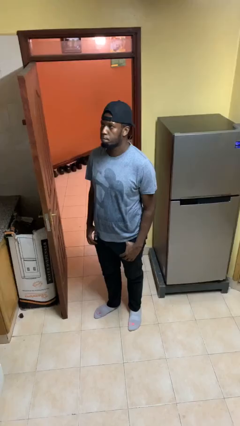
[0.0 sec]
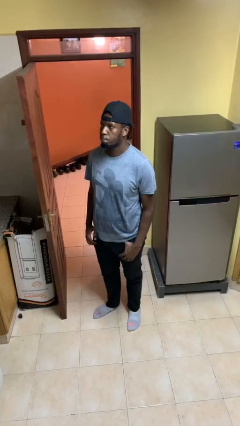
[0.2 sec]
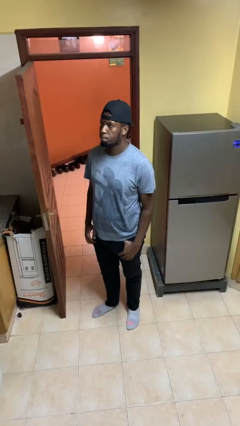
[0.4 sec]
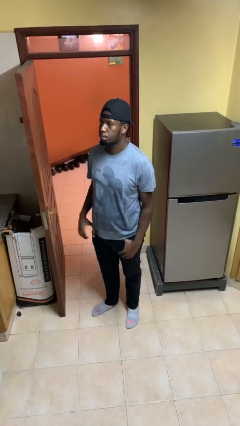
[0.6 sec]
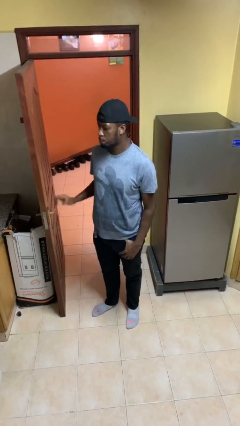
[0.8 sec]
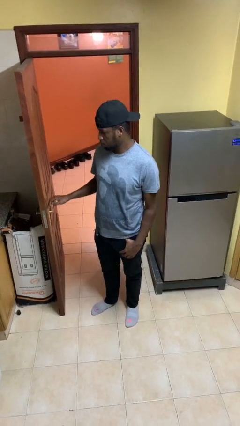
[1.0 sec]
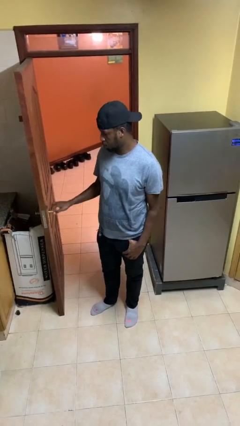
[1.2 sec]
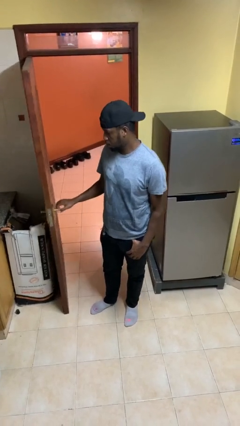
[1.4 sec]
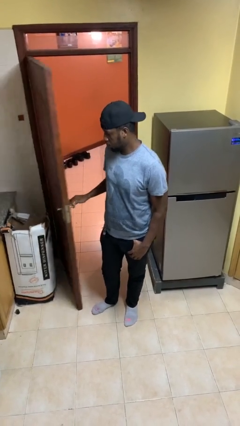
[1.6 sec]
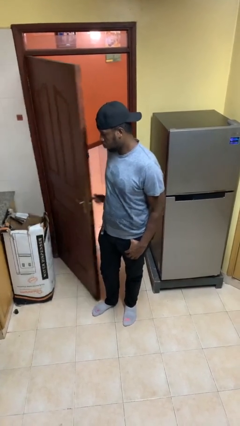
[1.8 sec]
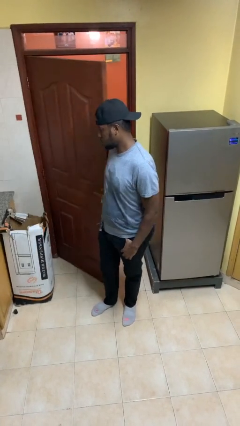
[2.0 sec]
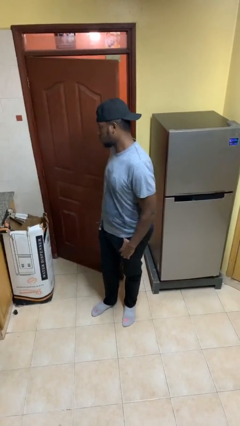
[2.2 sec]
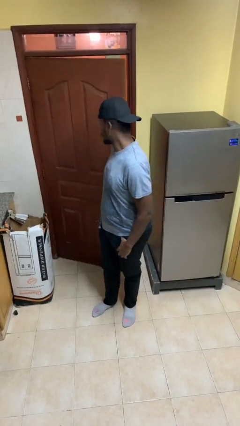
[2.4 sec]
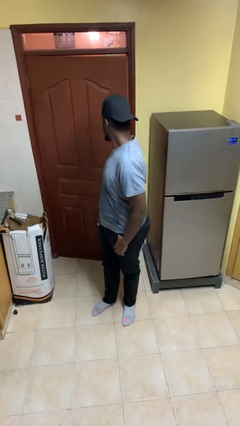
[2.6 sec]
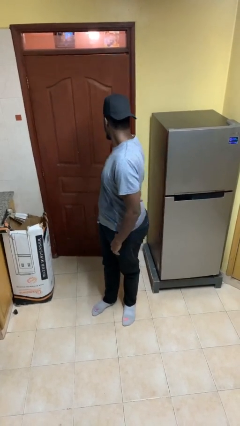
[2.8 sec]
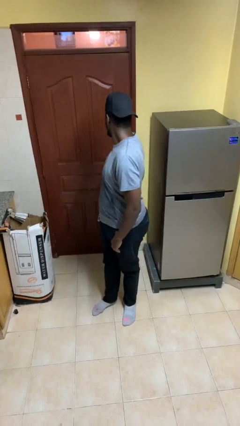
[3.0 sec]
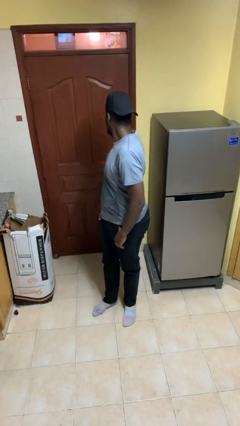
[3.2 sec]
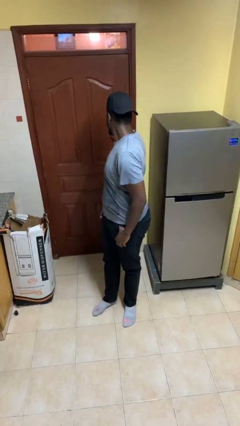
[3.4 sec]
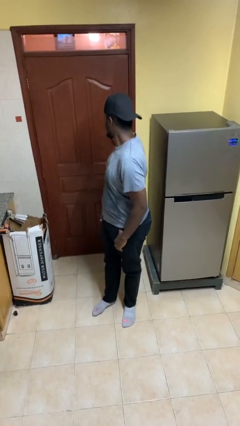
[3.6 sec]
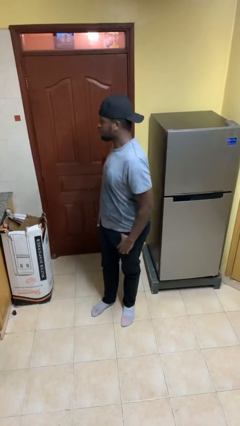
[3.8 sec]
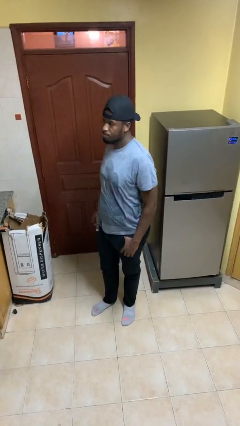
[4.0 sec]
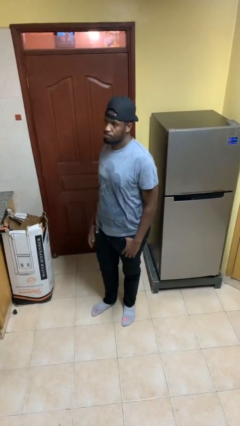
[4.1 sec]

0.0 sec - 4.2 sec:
person closes facility door

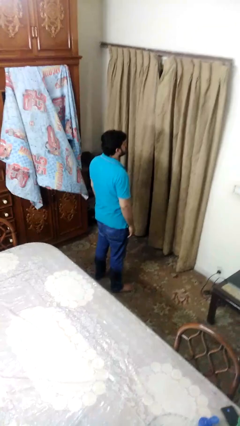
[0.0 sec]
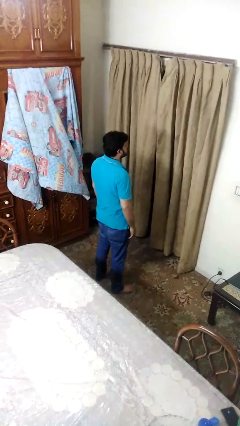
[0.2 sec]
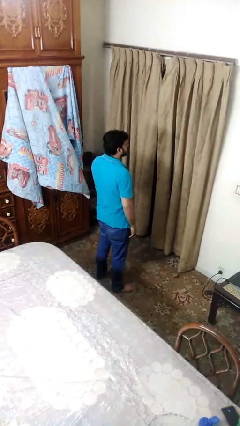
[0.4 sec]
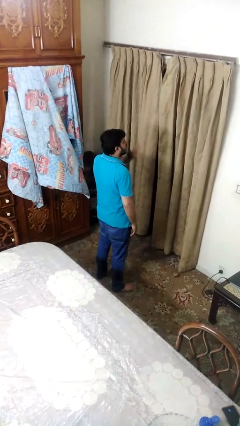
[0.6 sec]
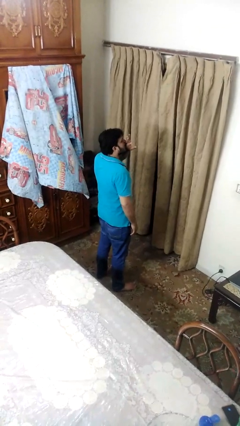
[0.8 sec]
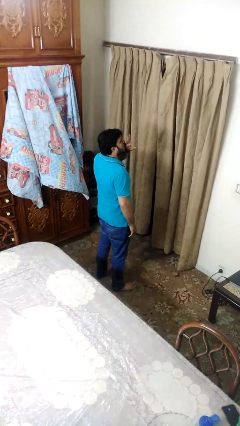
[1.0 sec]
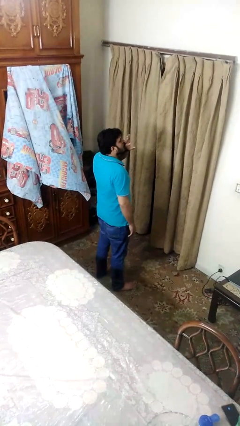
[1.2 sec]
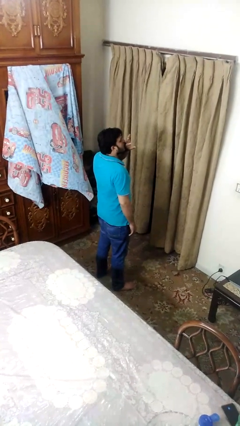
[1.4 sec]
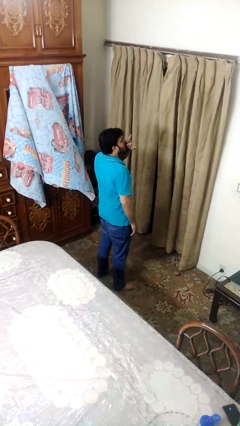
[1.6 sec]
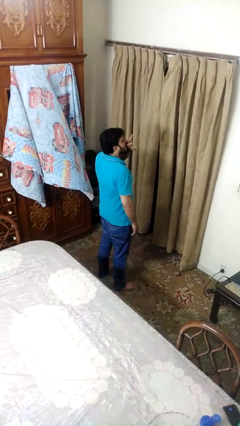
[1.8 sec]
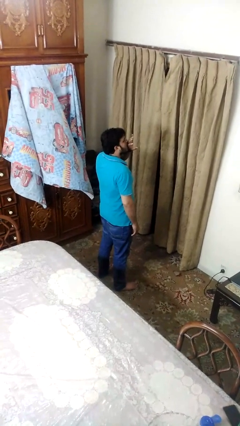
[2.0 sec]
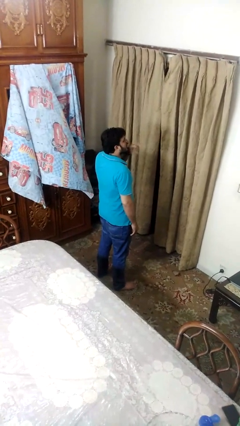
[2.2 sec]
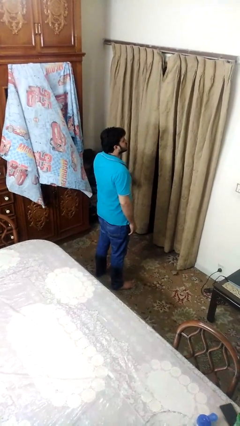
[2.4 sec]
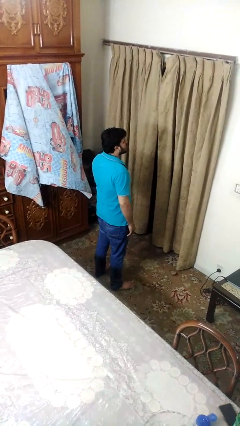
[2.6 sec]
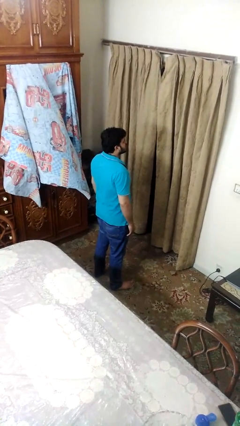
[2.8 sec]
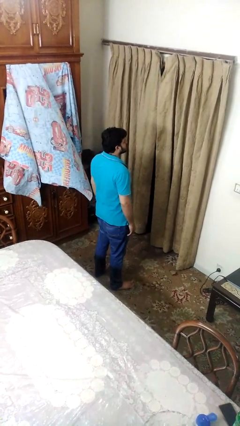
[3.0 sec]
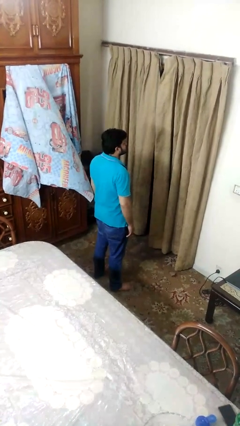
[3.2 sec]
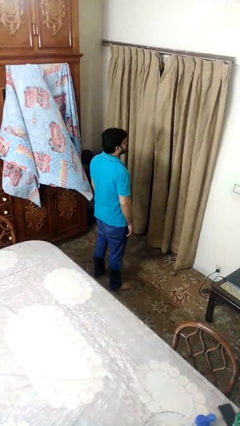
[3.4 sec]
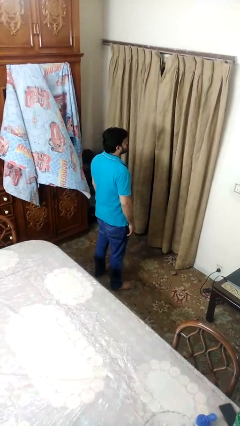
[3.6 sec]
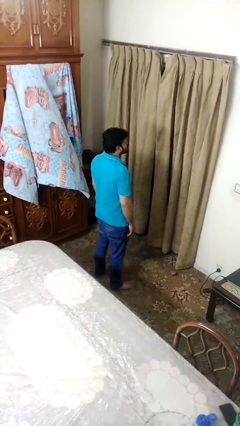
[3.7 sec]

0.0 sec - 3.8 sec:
person yawns

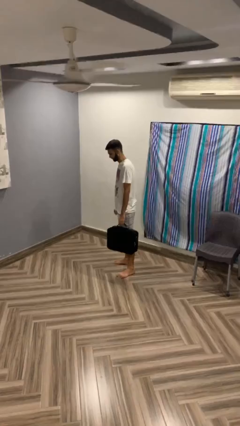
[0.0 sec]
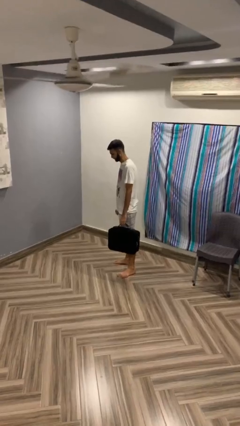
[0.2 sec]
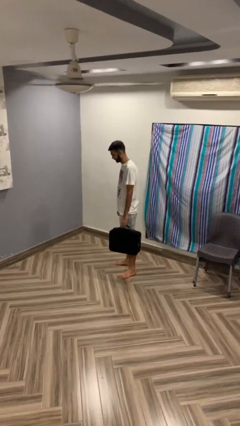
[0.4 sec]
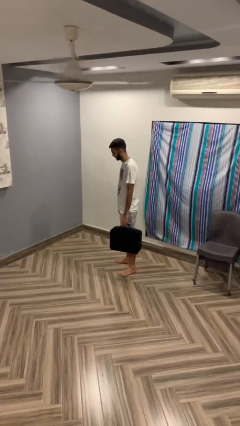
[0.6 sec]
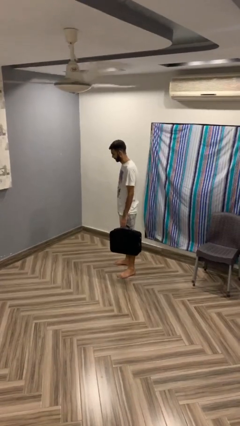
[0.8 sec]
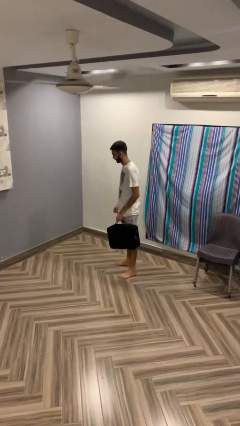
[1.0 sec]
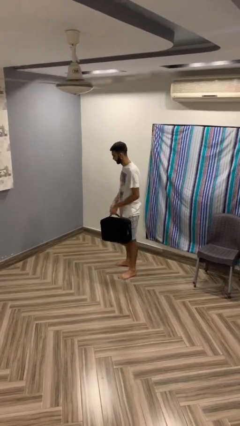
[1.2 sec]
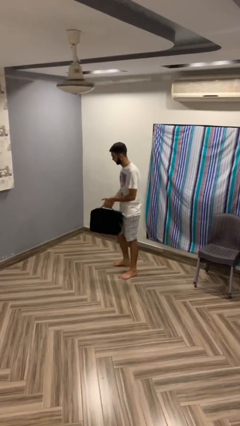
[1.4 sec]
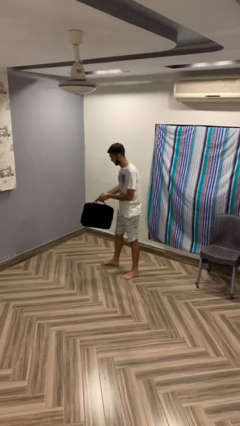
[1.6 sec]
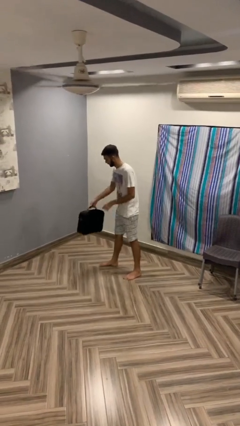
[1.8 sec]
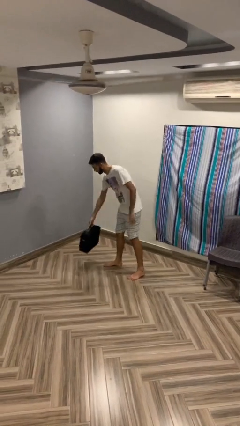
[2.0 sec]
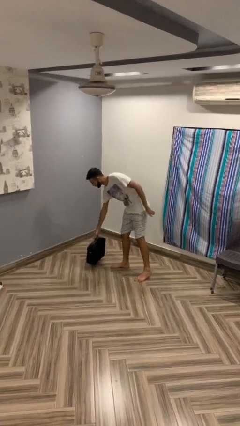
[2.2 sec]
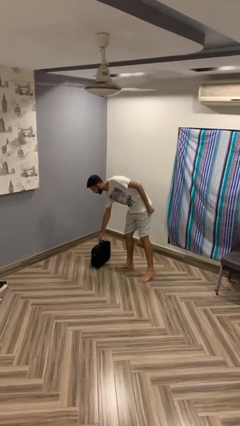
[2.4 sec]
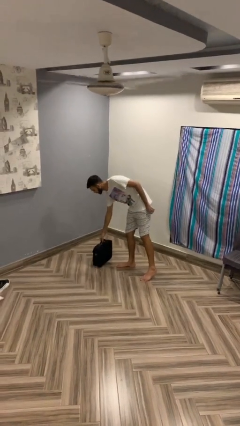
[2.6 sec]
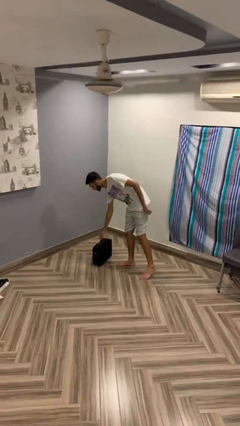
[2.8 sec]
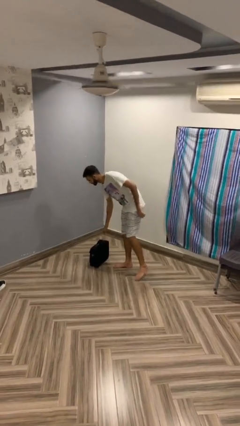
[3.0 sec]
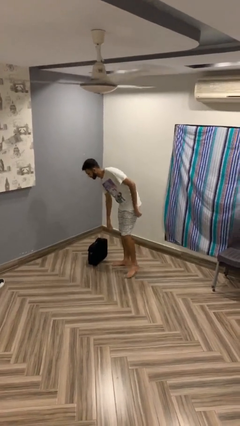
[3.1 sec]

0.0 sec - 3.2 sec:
person puts down object on floor

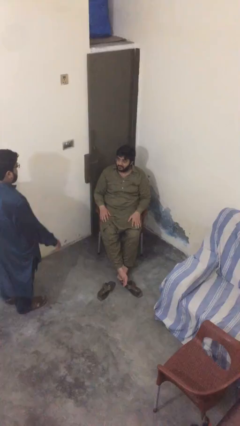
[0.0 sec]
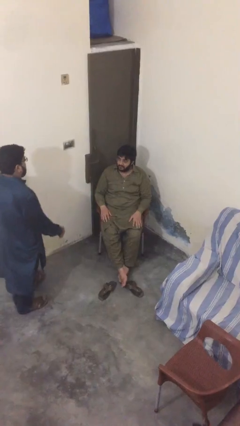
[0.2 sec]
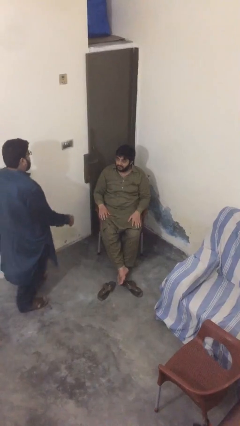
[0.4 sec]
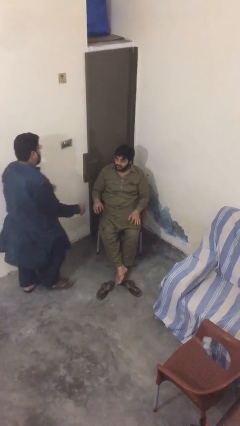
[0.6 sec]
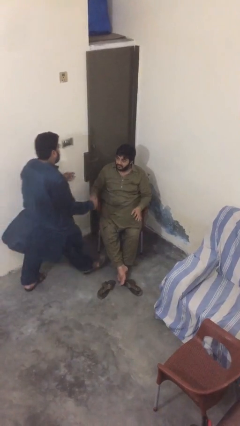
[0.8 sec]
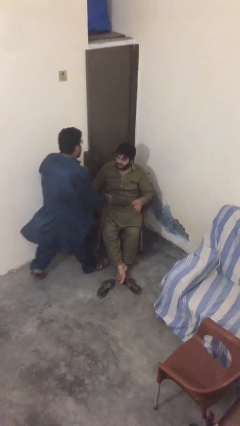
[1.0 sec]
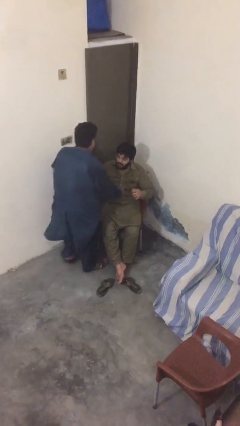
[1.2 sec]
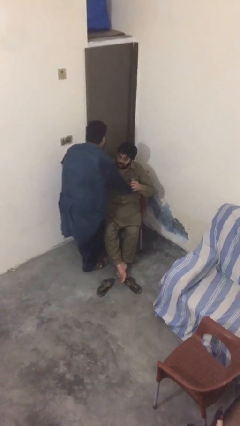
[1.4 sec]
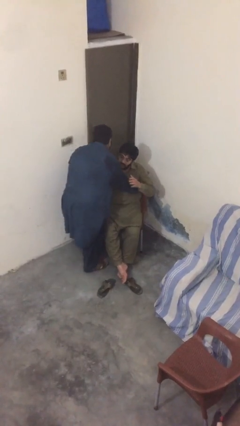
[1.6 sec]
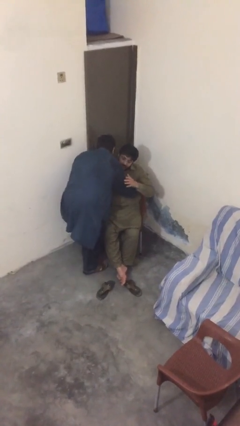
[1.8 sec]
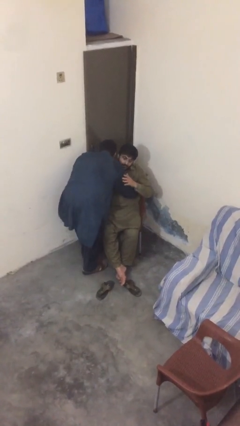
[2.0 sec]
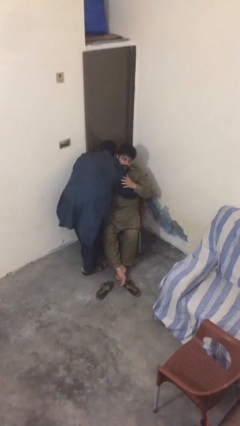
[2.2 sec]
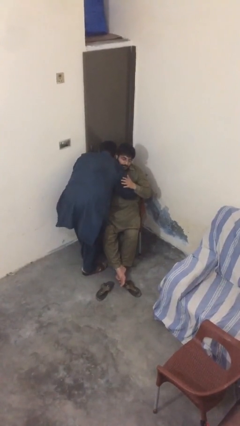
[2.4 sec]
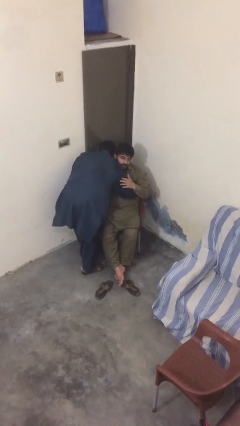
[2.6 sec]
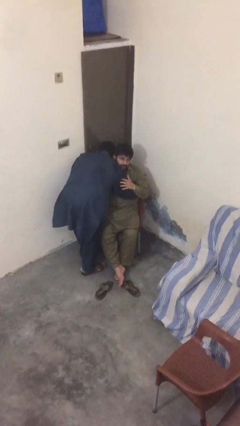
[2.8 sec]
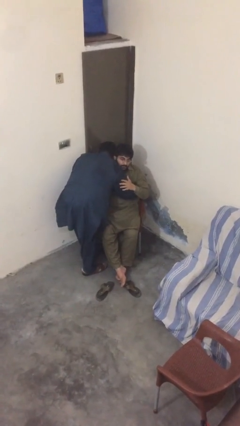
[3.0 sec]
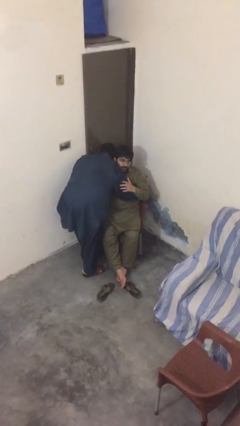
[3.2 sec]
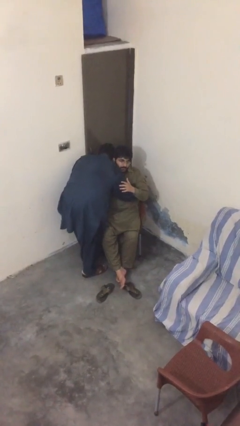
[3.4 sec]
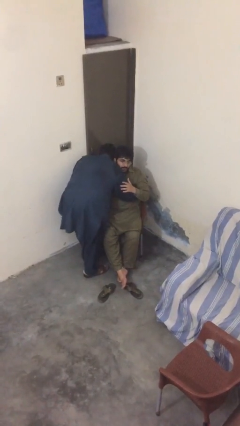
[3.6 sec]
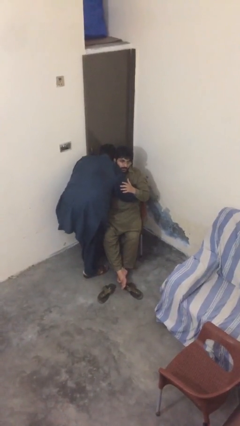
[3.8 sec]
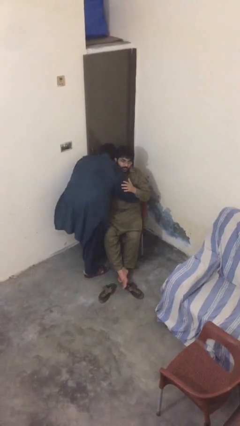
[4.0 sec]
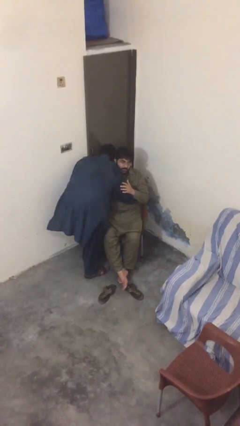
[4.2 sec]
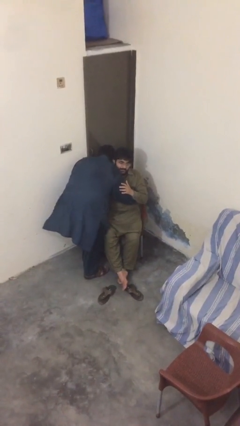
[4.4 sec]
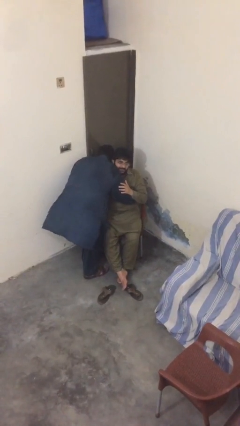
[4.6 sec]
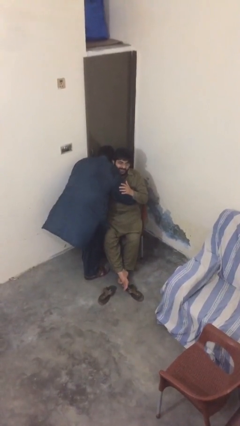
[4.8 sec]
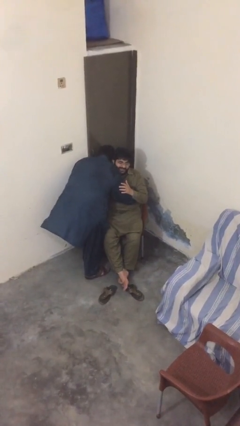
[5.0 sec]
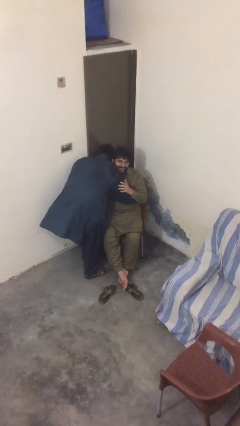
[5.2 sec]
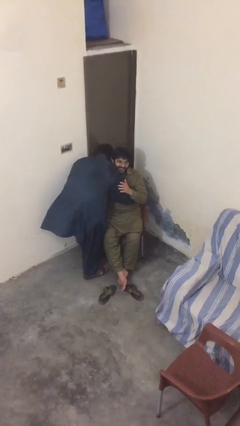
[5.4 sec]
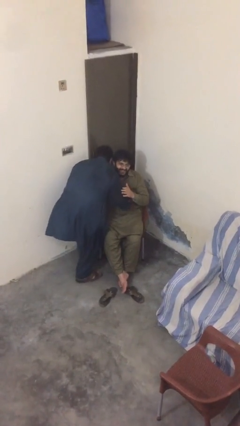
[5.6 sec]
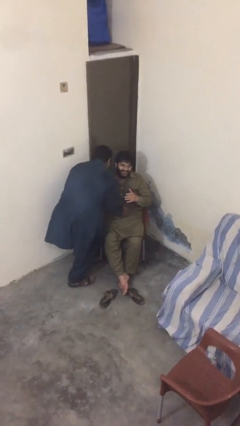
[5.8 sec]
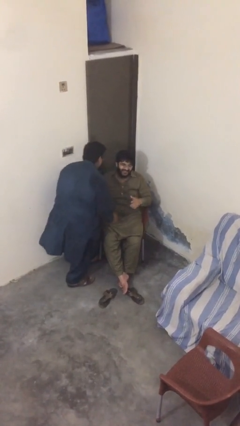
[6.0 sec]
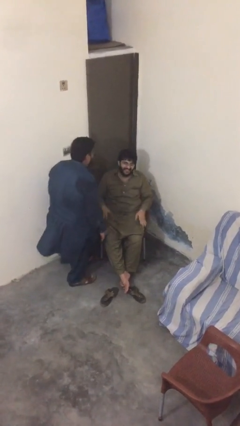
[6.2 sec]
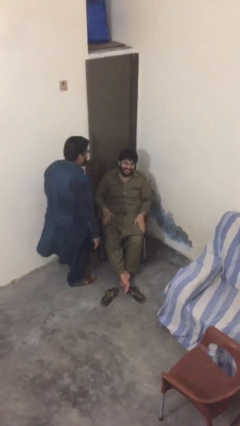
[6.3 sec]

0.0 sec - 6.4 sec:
person embraces person
